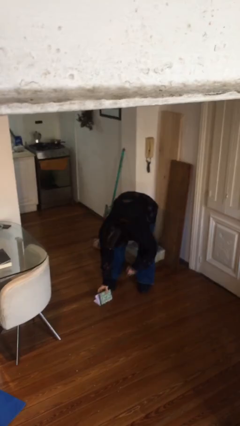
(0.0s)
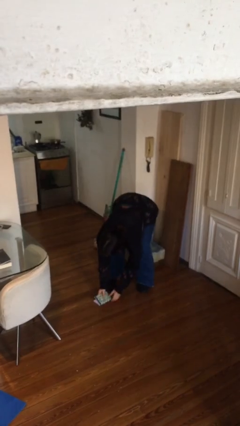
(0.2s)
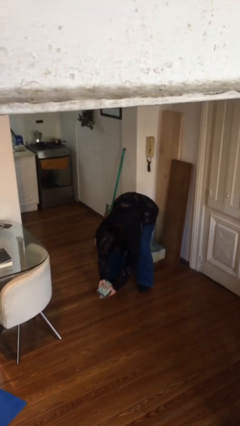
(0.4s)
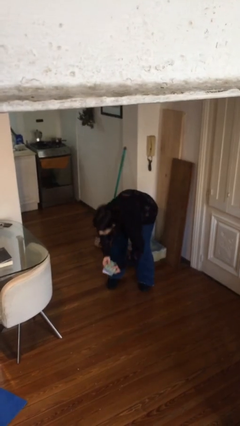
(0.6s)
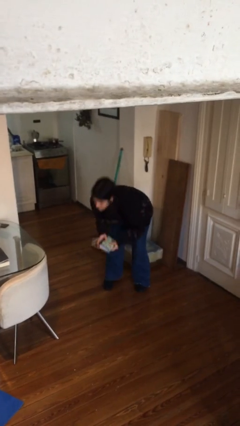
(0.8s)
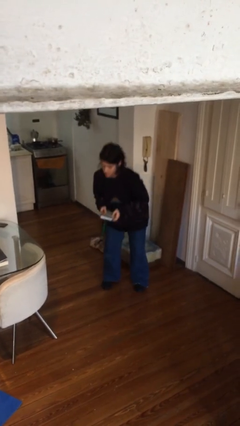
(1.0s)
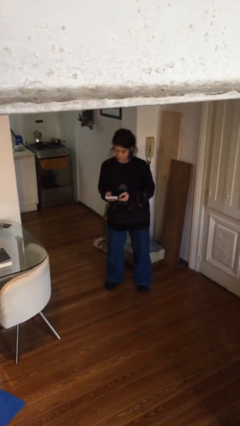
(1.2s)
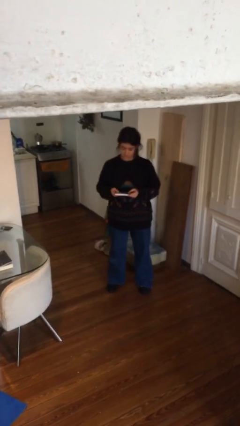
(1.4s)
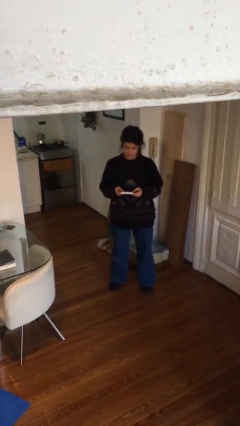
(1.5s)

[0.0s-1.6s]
person picks up object from floor

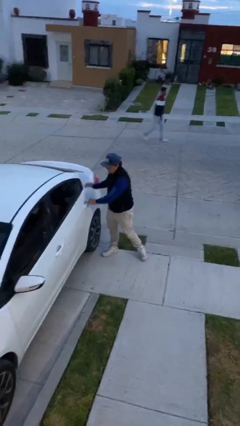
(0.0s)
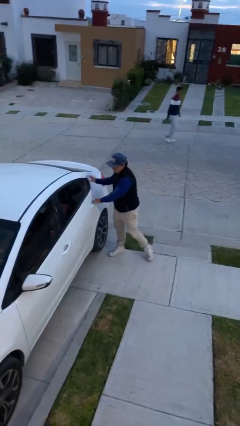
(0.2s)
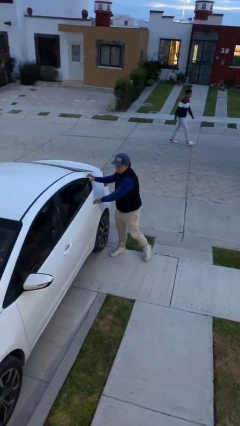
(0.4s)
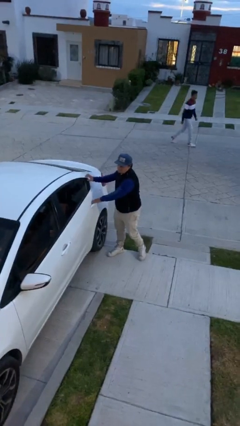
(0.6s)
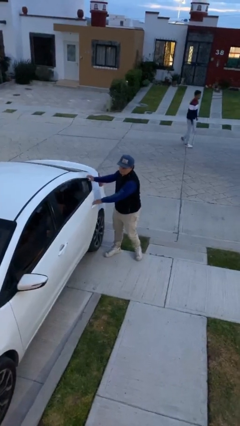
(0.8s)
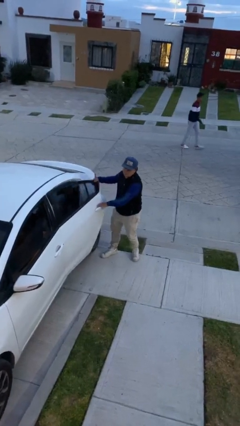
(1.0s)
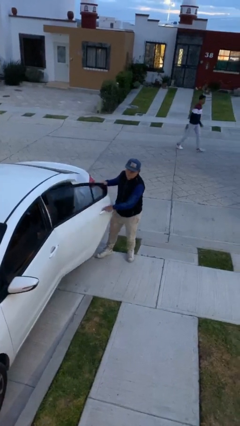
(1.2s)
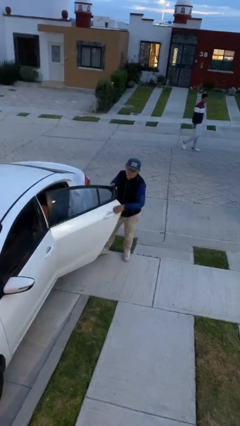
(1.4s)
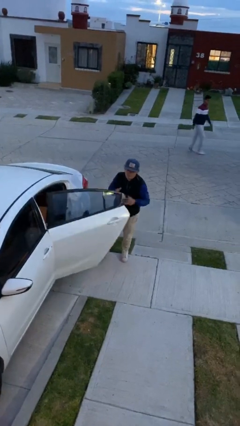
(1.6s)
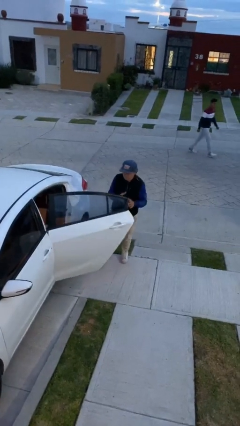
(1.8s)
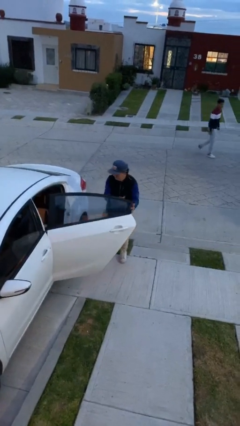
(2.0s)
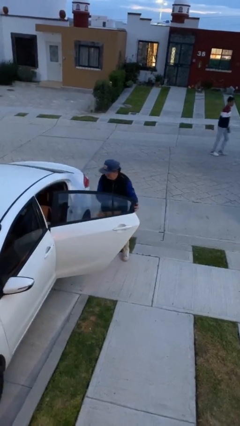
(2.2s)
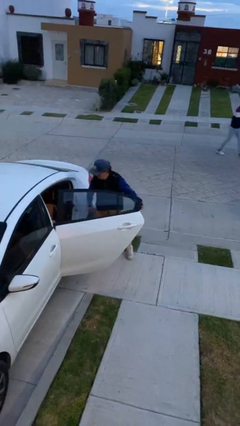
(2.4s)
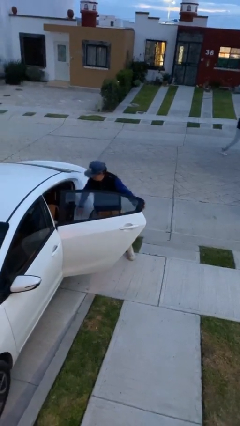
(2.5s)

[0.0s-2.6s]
person opens car door

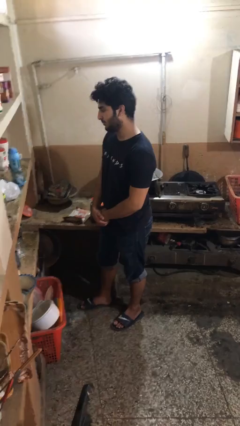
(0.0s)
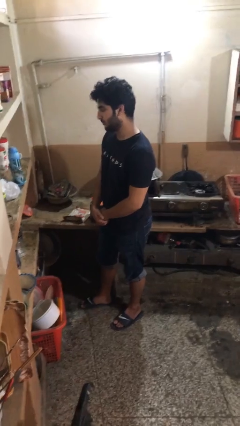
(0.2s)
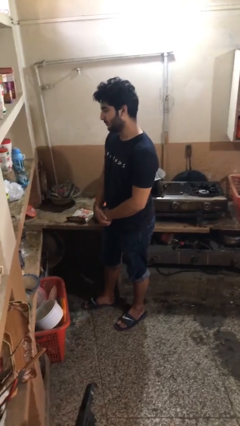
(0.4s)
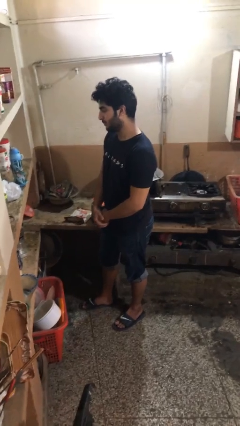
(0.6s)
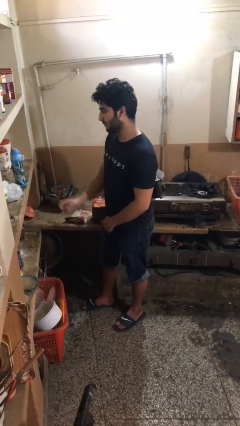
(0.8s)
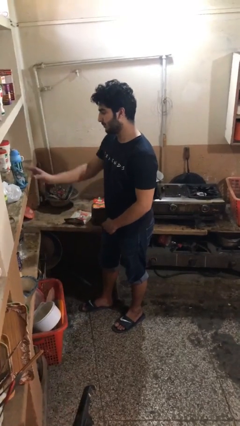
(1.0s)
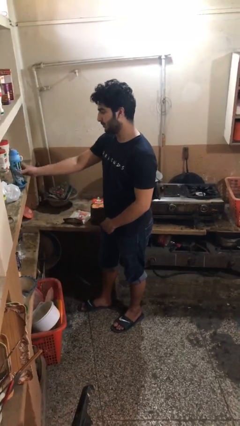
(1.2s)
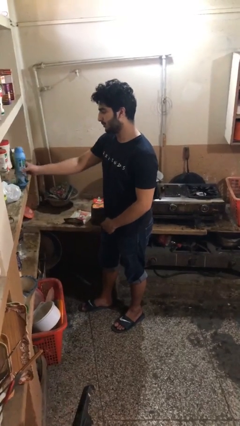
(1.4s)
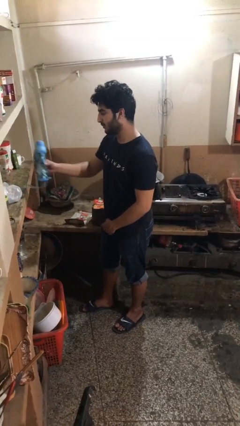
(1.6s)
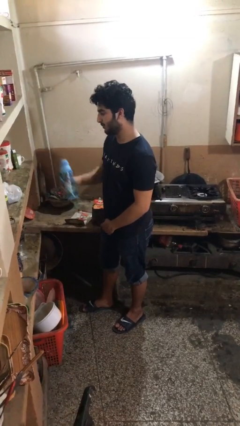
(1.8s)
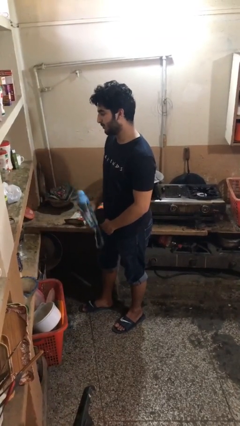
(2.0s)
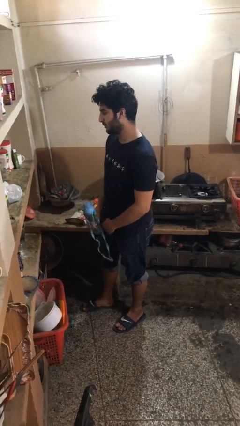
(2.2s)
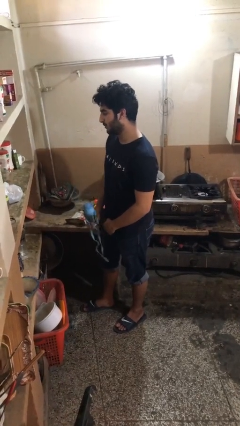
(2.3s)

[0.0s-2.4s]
person picks up object from countertop

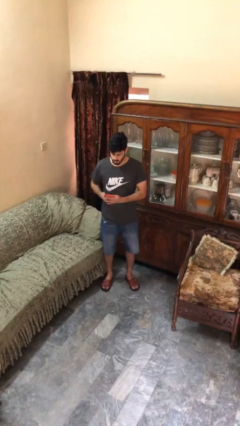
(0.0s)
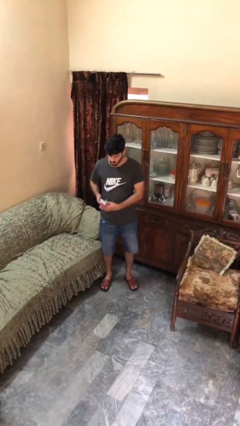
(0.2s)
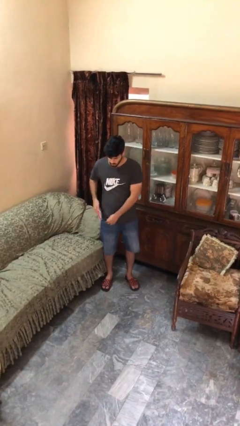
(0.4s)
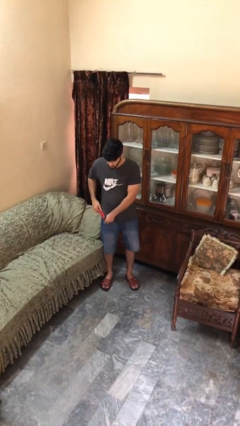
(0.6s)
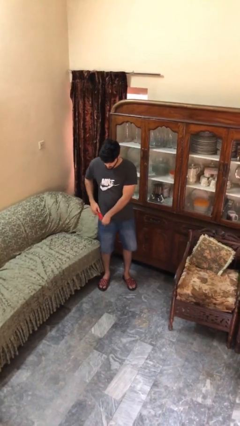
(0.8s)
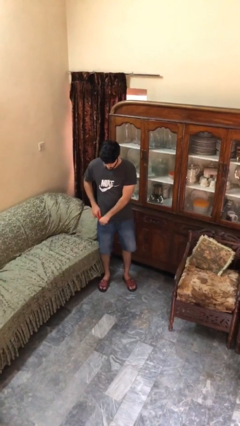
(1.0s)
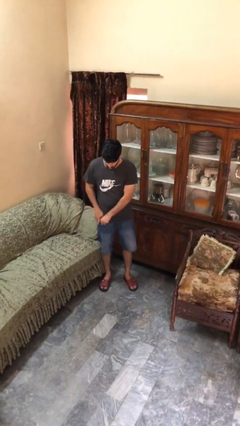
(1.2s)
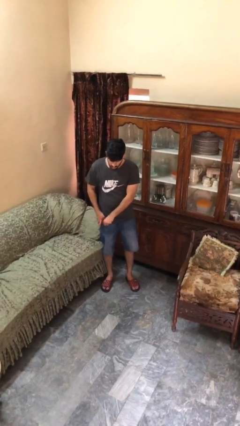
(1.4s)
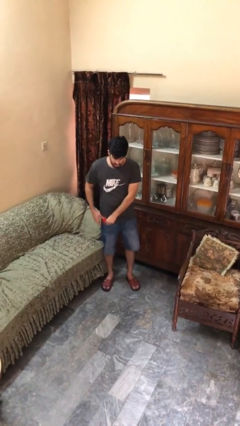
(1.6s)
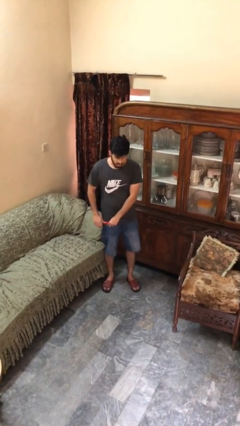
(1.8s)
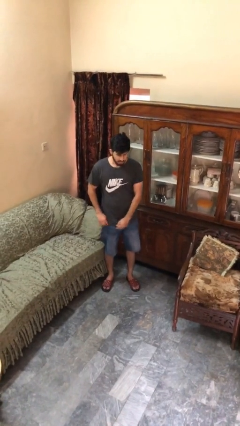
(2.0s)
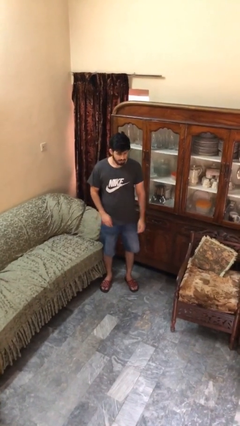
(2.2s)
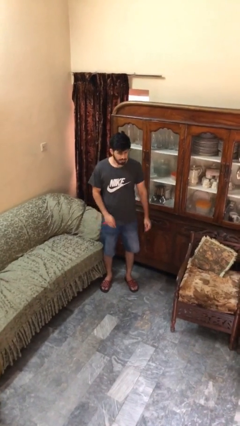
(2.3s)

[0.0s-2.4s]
person puts phone into pocket

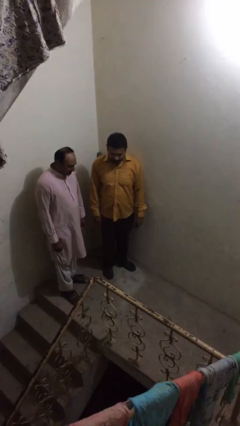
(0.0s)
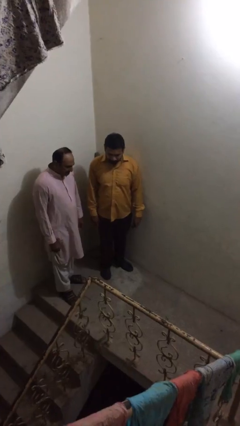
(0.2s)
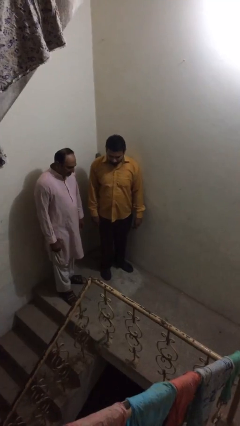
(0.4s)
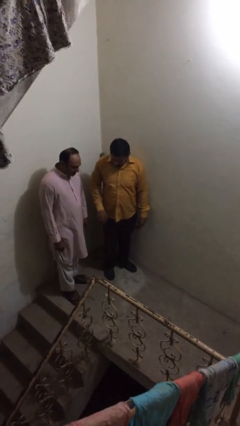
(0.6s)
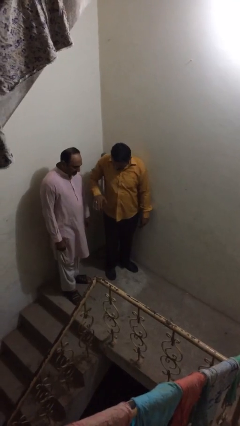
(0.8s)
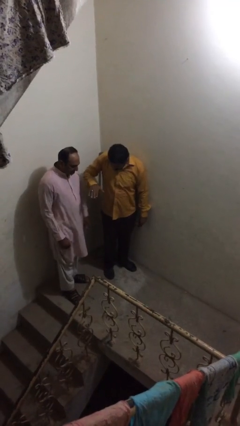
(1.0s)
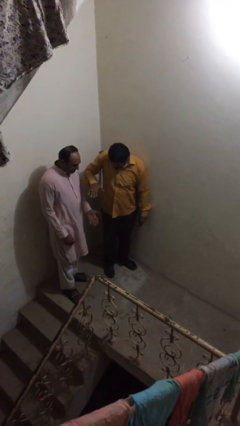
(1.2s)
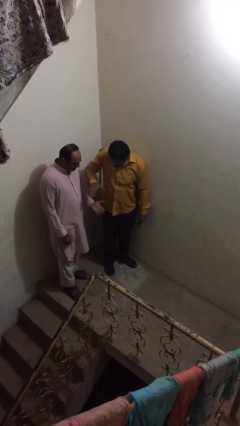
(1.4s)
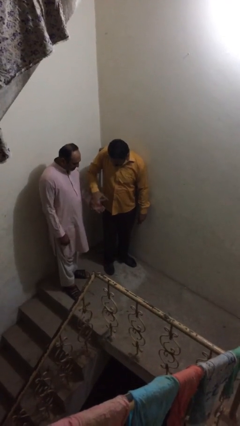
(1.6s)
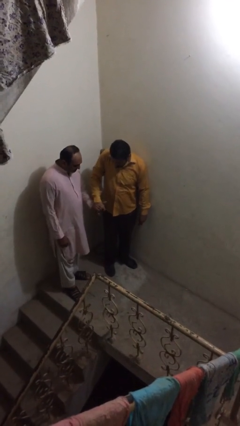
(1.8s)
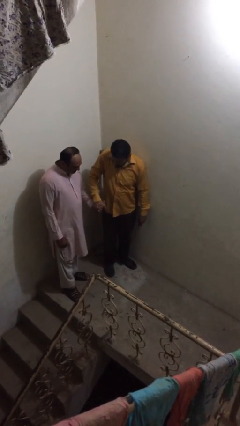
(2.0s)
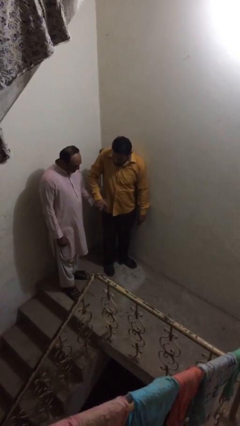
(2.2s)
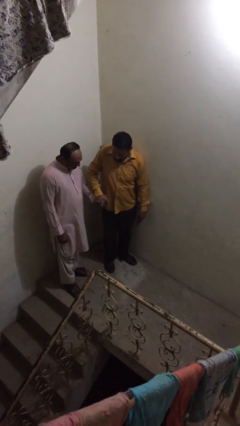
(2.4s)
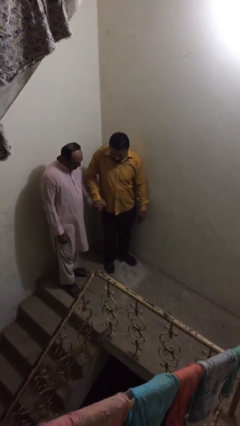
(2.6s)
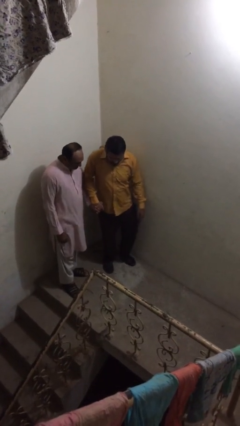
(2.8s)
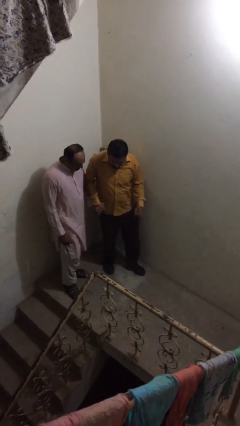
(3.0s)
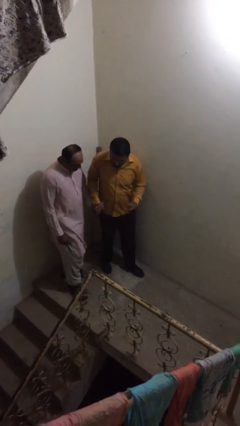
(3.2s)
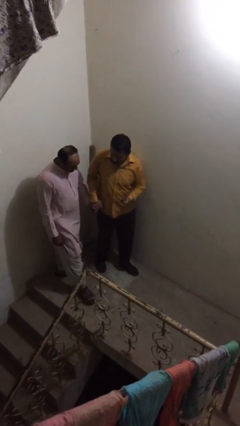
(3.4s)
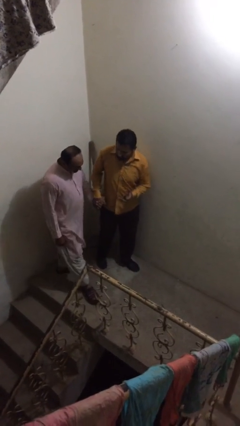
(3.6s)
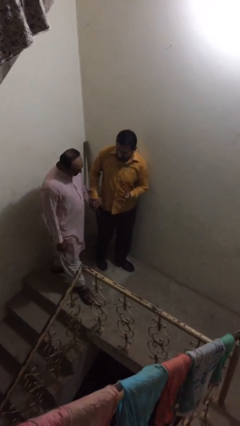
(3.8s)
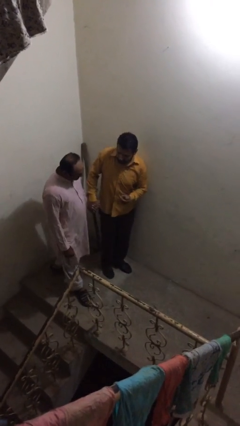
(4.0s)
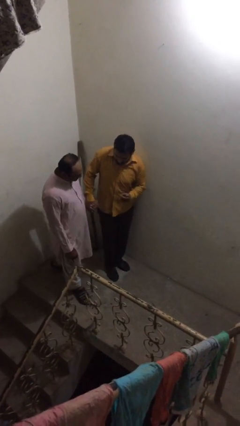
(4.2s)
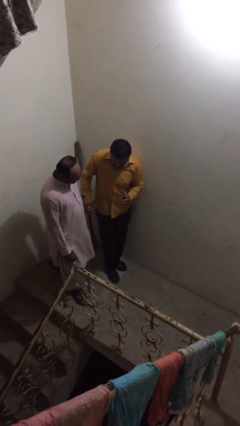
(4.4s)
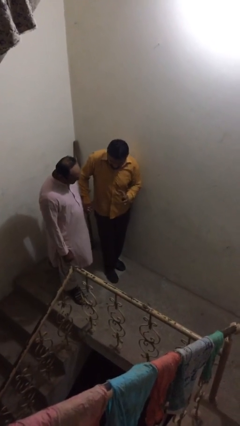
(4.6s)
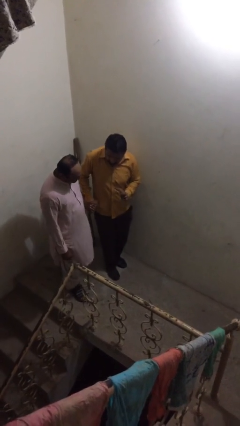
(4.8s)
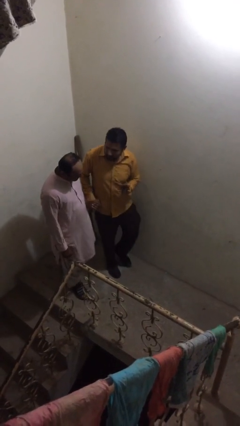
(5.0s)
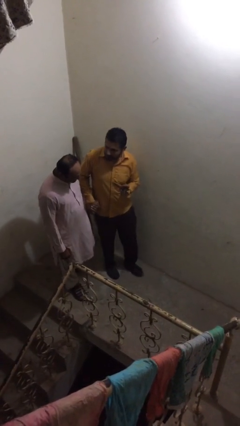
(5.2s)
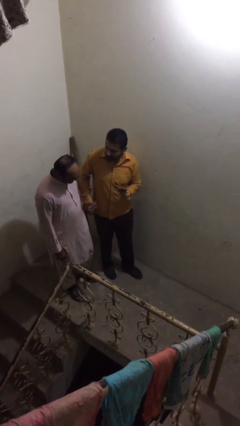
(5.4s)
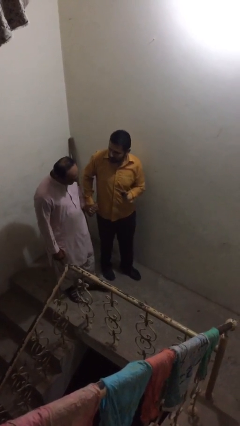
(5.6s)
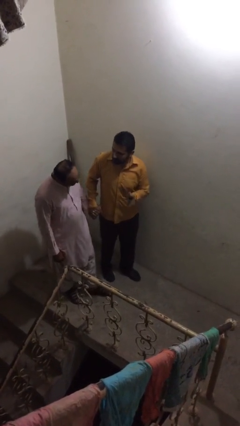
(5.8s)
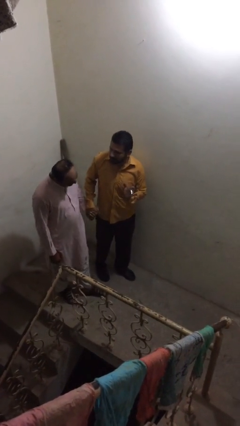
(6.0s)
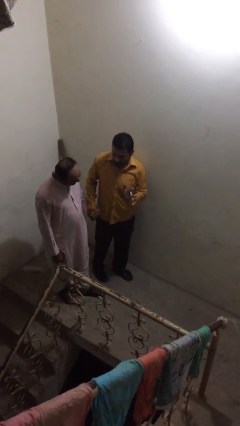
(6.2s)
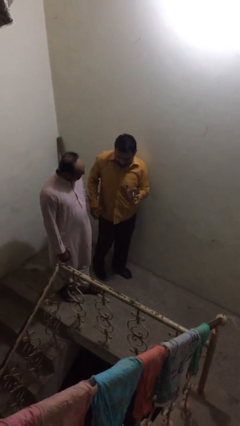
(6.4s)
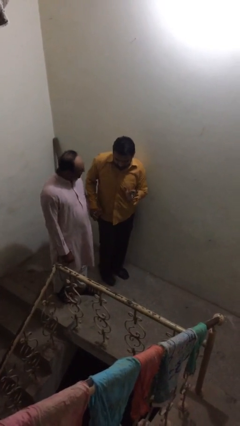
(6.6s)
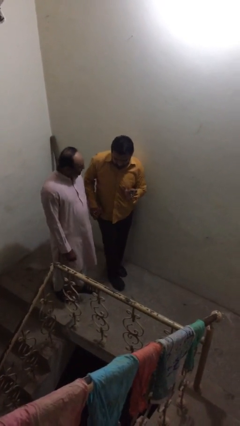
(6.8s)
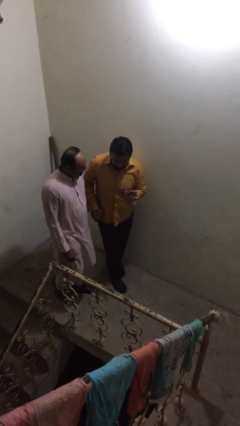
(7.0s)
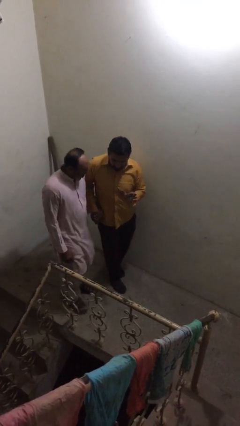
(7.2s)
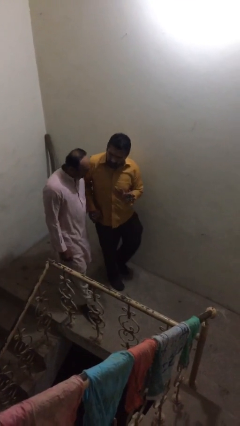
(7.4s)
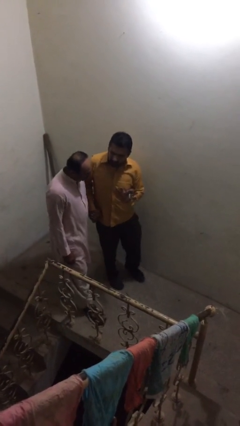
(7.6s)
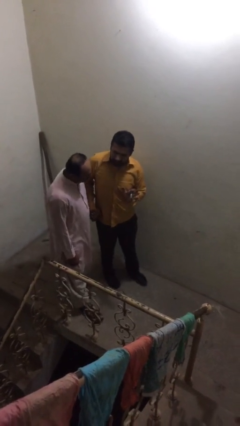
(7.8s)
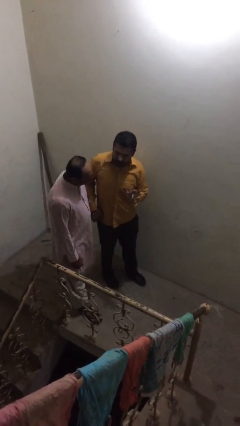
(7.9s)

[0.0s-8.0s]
person holds hand
